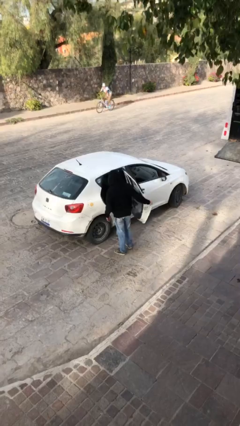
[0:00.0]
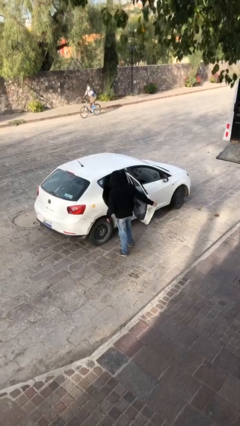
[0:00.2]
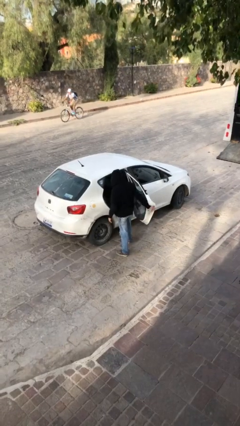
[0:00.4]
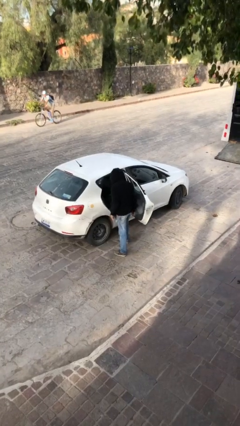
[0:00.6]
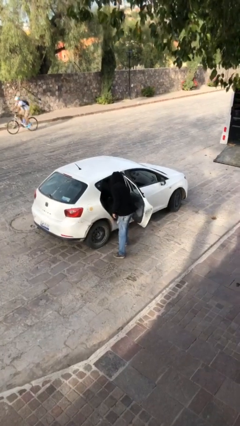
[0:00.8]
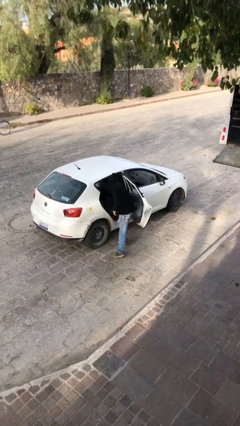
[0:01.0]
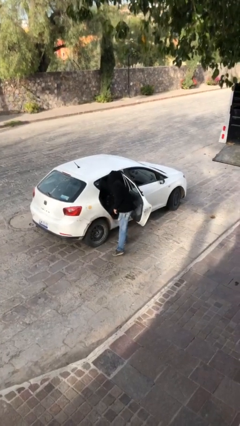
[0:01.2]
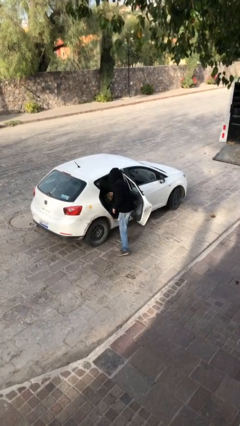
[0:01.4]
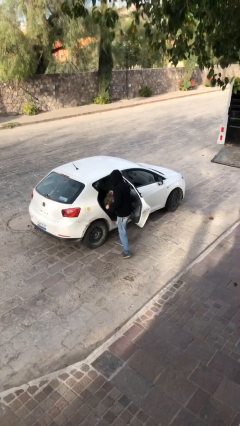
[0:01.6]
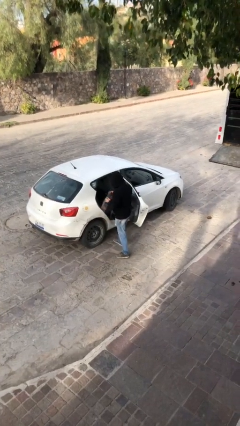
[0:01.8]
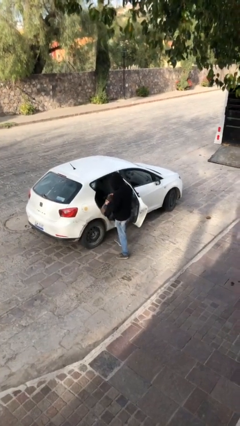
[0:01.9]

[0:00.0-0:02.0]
person unloads car

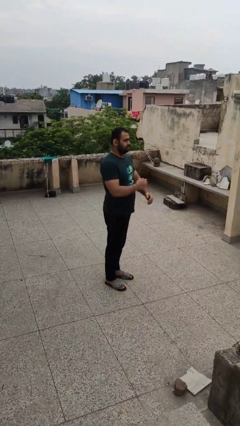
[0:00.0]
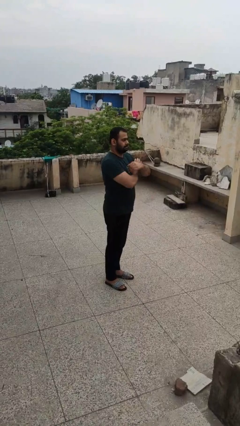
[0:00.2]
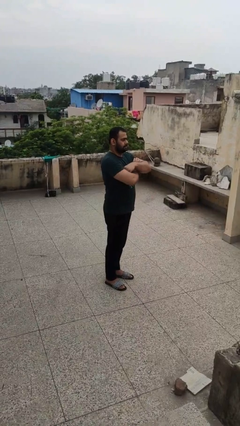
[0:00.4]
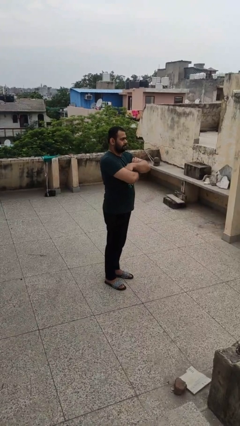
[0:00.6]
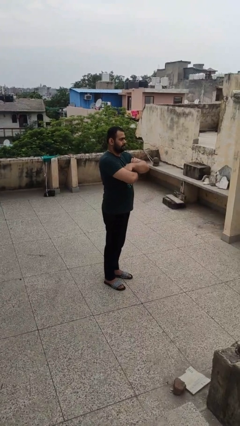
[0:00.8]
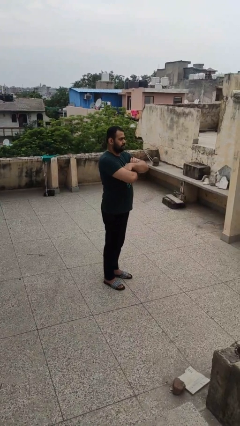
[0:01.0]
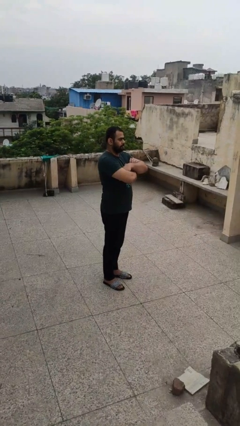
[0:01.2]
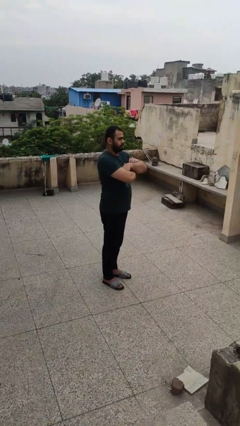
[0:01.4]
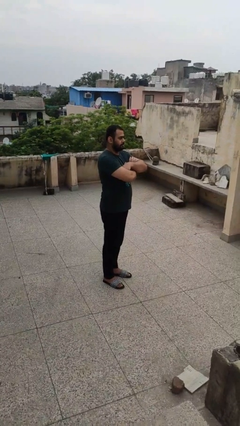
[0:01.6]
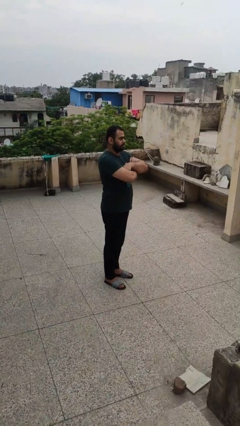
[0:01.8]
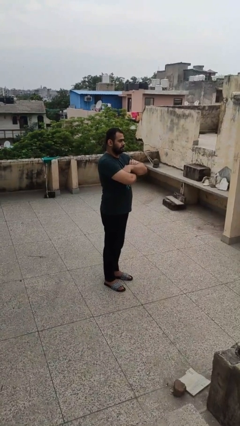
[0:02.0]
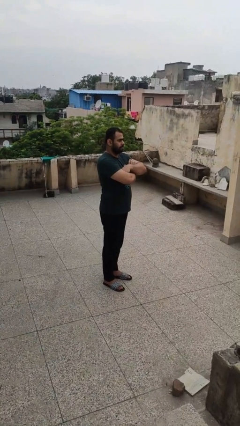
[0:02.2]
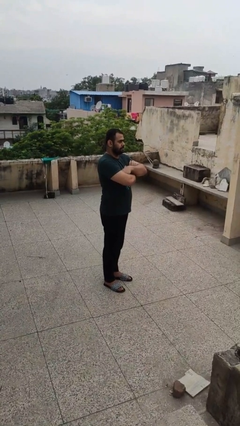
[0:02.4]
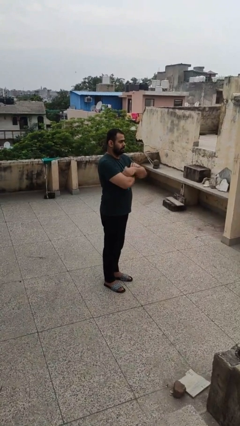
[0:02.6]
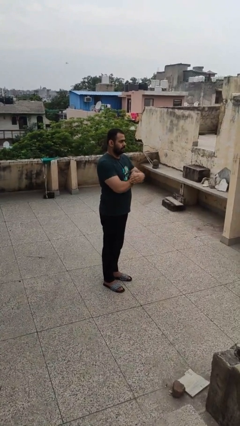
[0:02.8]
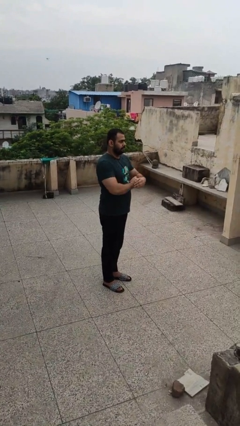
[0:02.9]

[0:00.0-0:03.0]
person crosses arms

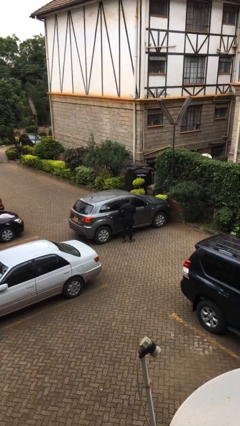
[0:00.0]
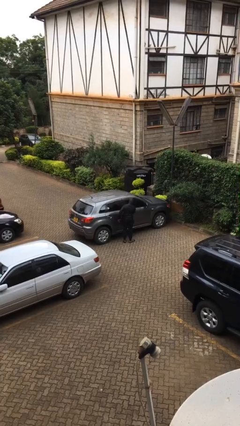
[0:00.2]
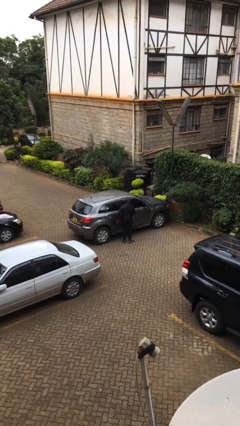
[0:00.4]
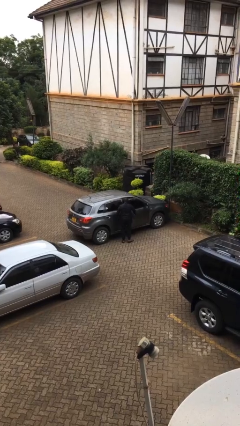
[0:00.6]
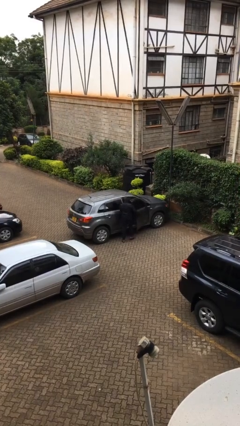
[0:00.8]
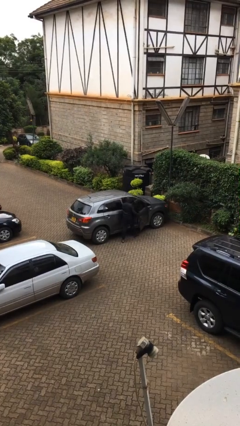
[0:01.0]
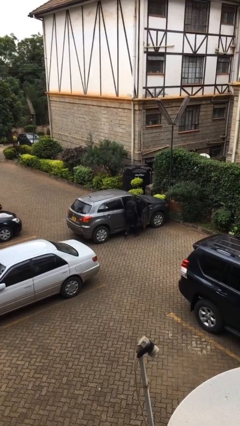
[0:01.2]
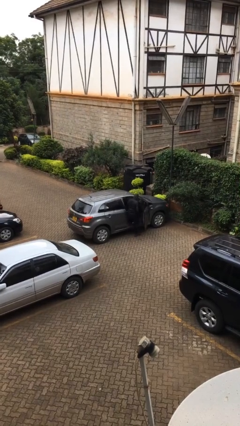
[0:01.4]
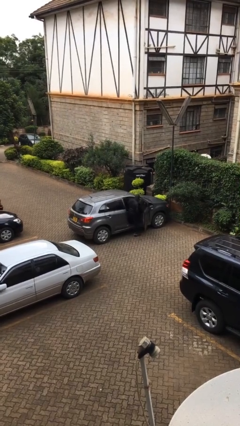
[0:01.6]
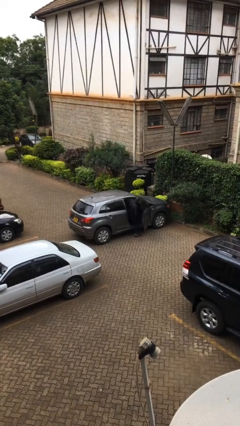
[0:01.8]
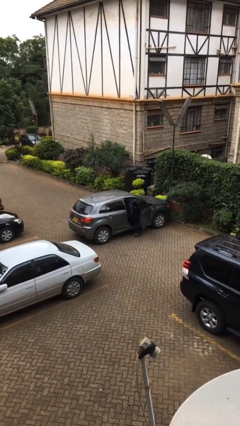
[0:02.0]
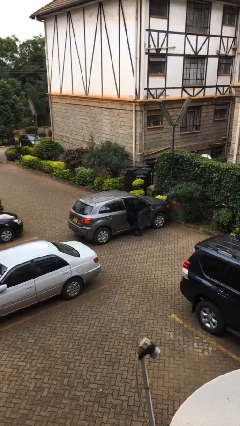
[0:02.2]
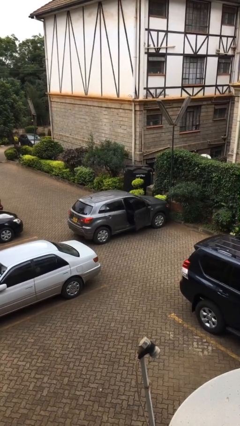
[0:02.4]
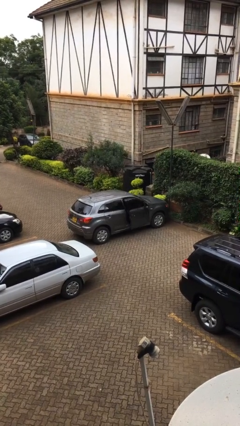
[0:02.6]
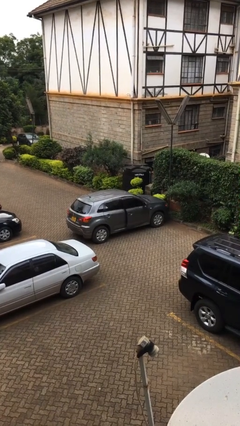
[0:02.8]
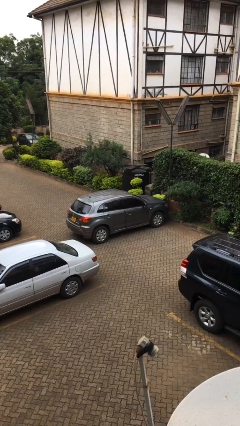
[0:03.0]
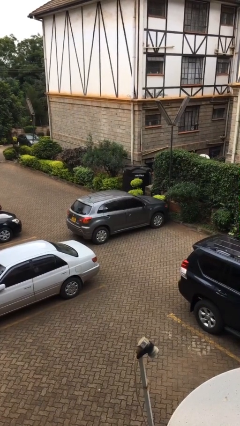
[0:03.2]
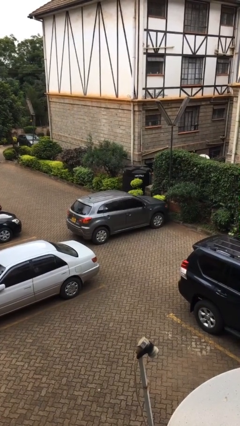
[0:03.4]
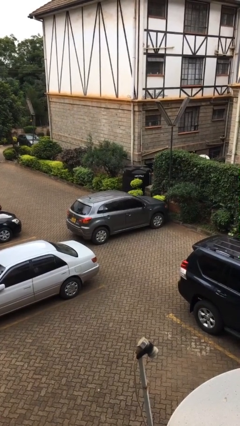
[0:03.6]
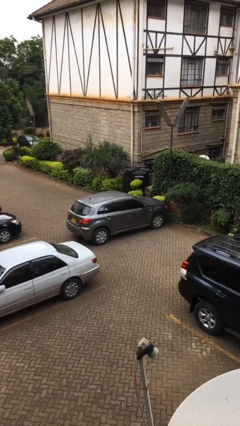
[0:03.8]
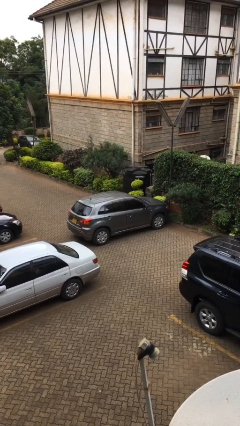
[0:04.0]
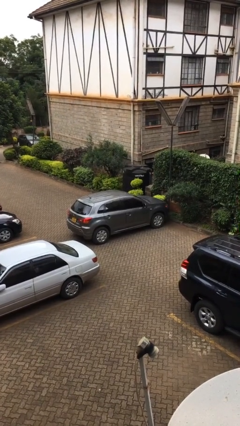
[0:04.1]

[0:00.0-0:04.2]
car picks up person

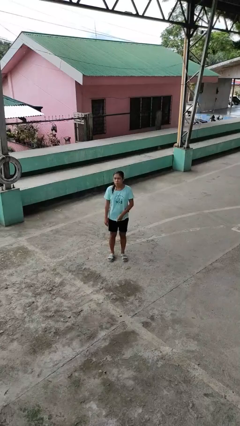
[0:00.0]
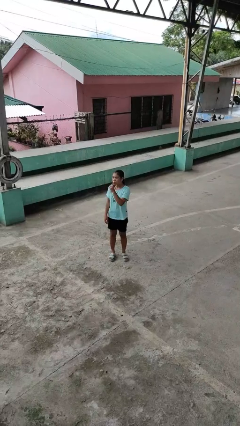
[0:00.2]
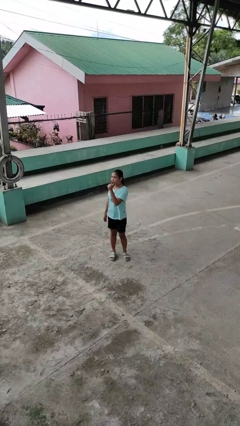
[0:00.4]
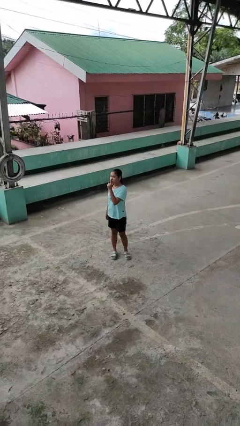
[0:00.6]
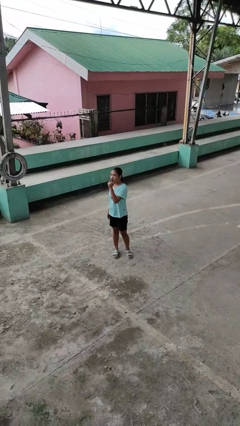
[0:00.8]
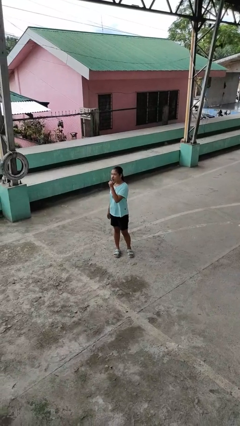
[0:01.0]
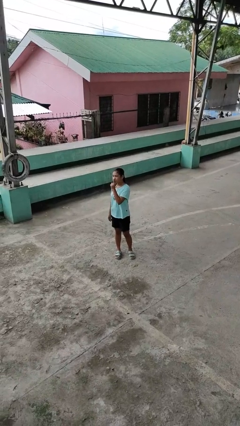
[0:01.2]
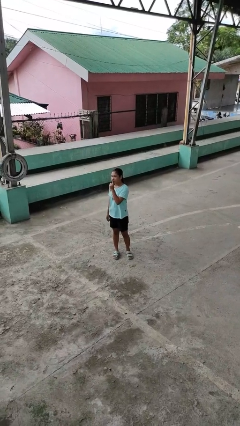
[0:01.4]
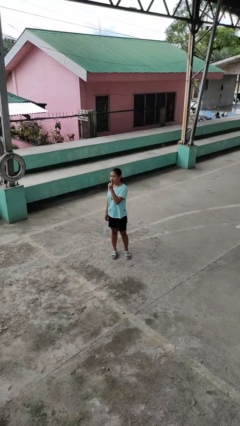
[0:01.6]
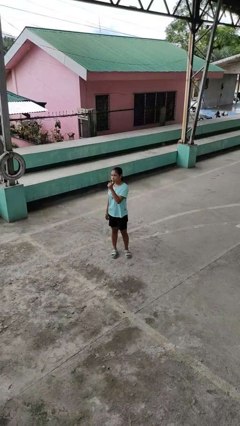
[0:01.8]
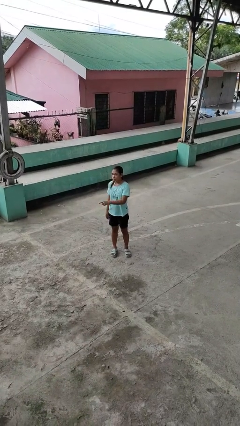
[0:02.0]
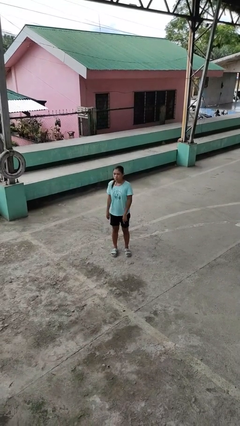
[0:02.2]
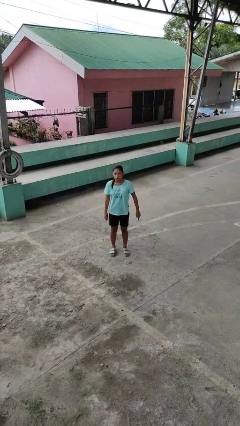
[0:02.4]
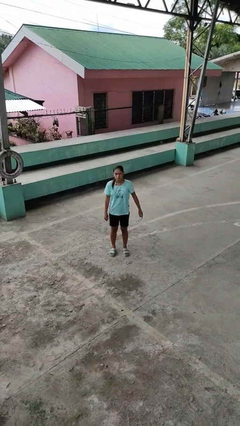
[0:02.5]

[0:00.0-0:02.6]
person gestures be quiet

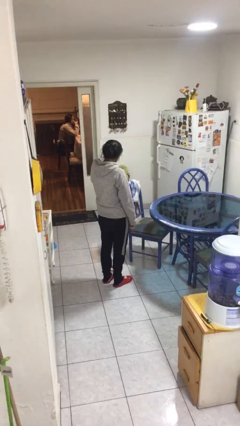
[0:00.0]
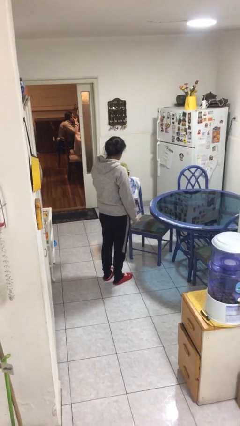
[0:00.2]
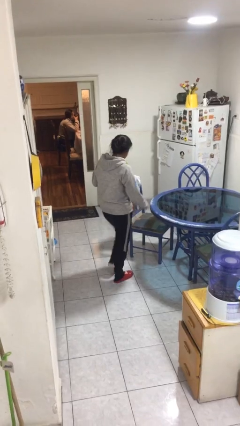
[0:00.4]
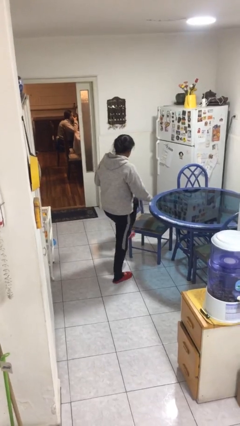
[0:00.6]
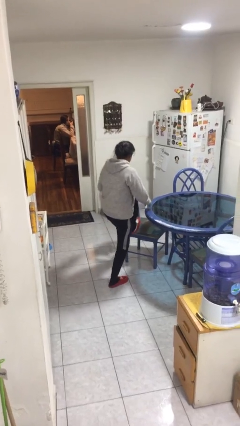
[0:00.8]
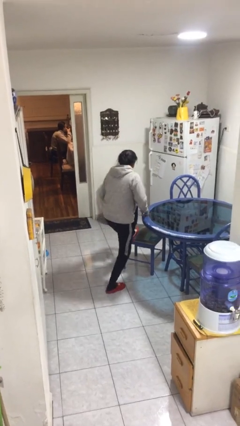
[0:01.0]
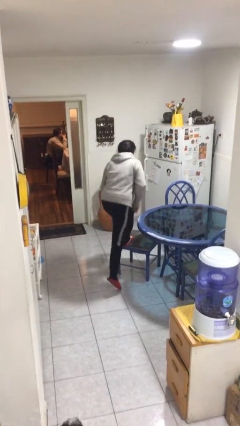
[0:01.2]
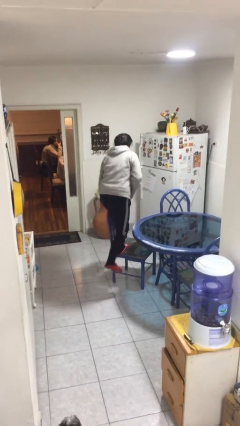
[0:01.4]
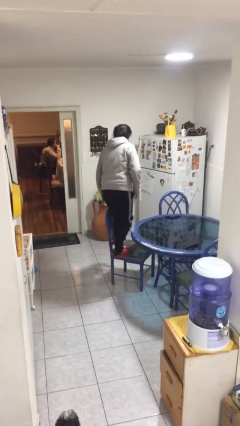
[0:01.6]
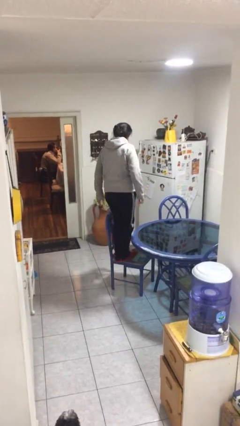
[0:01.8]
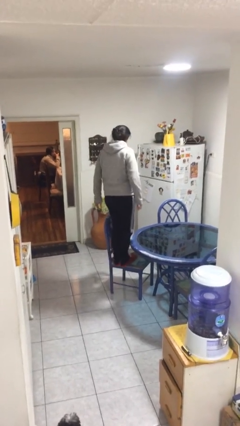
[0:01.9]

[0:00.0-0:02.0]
person climbs on chair

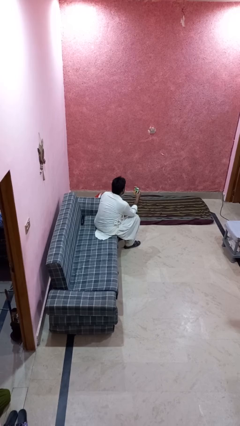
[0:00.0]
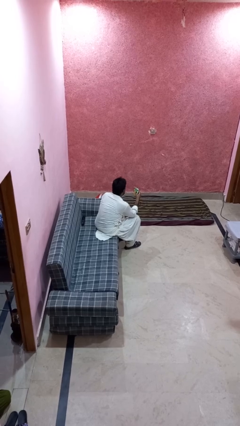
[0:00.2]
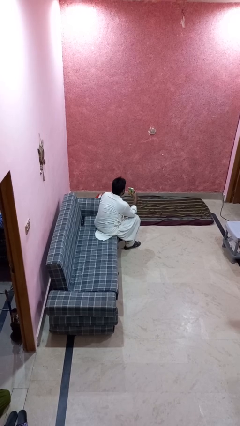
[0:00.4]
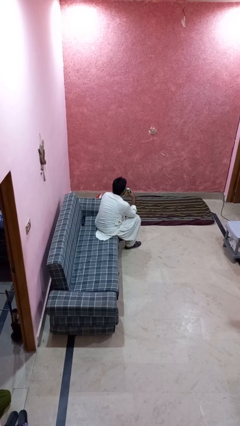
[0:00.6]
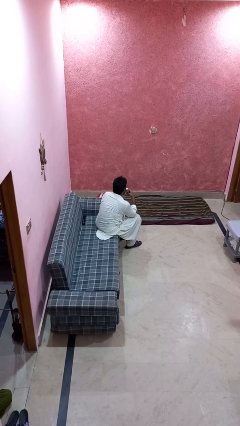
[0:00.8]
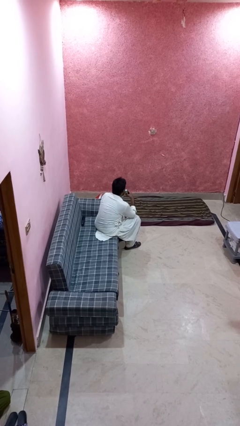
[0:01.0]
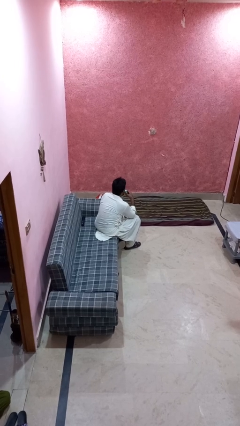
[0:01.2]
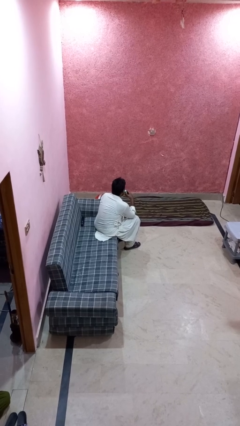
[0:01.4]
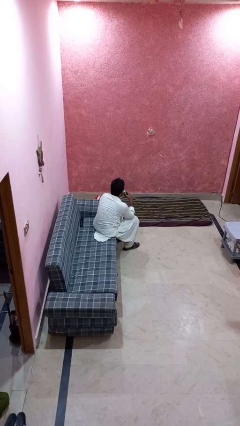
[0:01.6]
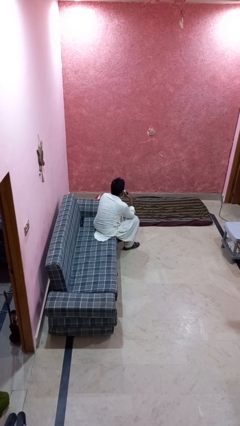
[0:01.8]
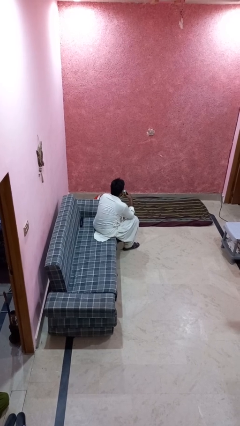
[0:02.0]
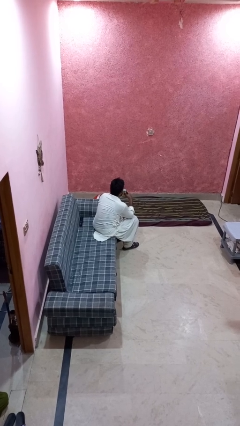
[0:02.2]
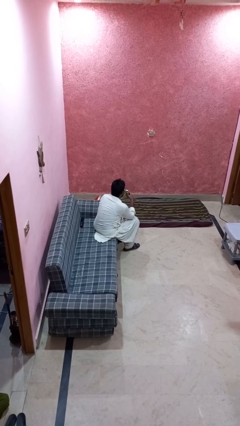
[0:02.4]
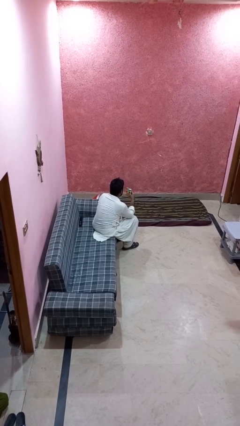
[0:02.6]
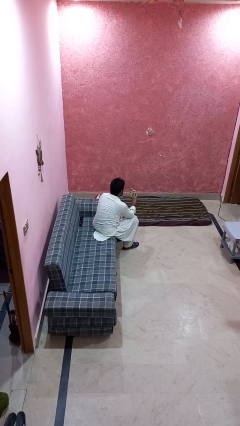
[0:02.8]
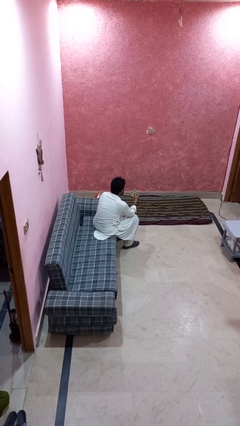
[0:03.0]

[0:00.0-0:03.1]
person drinks from straw

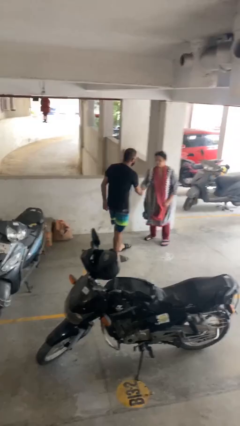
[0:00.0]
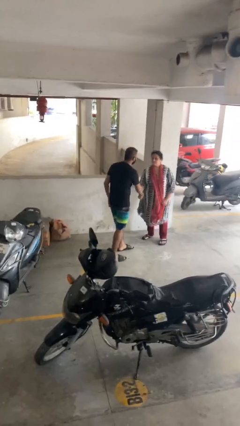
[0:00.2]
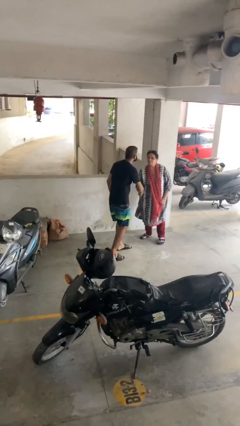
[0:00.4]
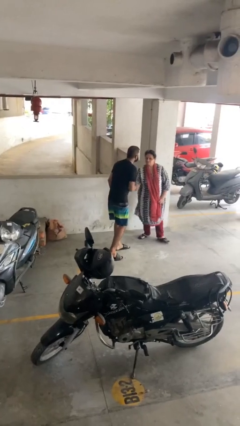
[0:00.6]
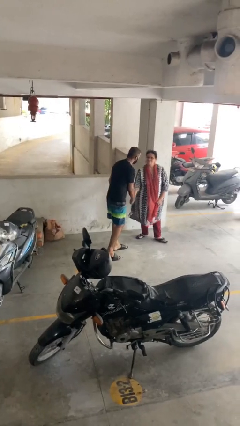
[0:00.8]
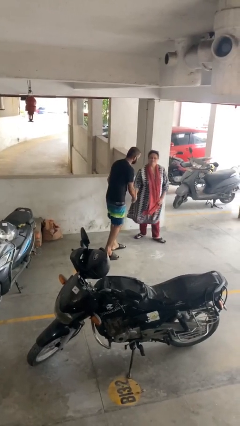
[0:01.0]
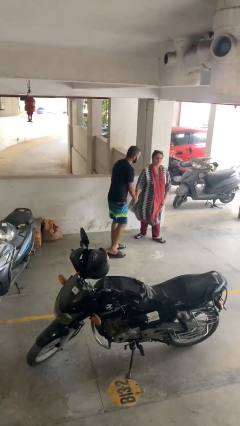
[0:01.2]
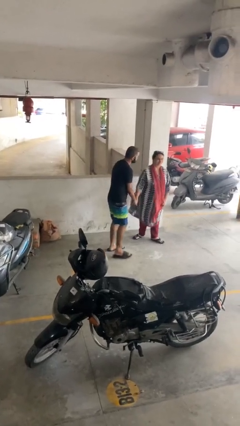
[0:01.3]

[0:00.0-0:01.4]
person shakes hand
